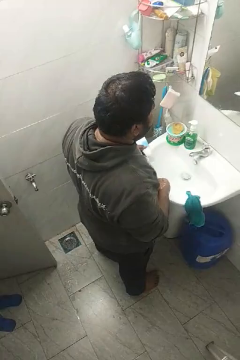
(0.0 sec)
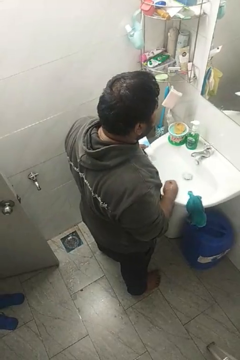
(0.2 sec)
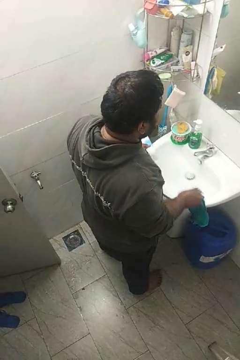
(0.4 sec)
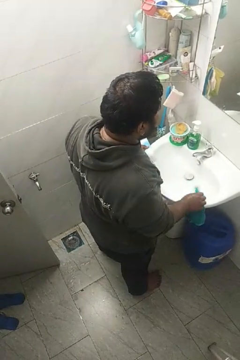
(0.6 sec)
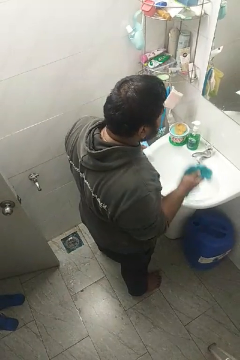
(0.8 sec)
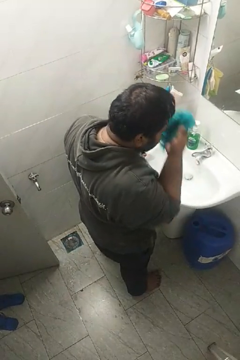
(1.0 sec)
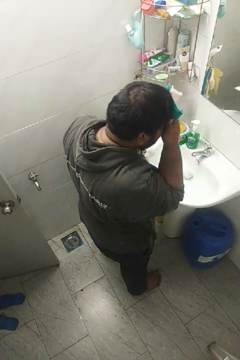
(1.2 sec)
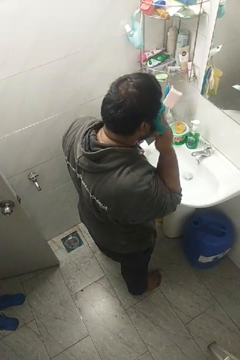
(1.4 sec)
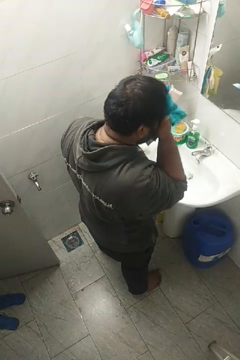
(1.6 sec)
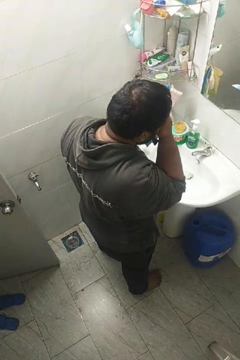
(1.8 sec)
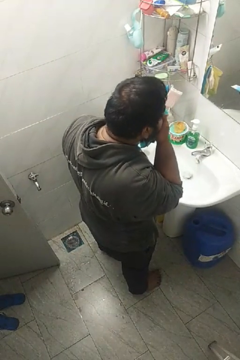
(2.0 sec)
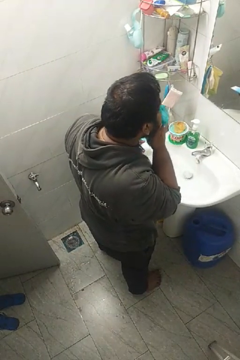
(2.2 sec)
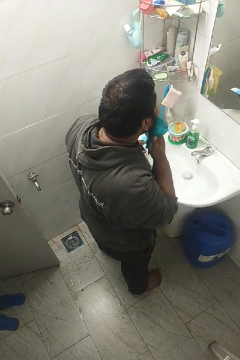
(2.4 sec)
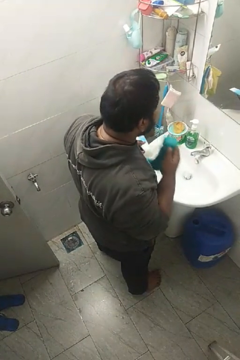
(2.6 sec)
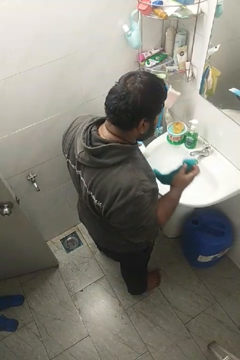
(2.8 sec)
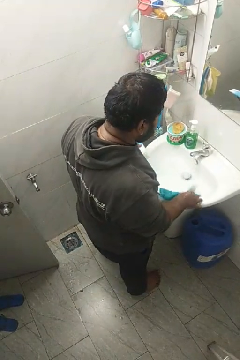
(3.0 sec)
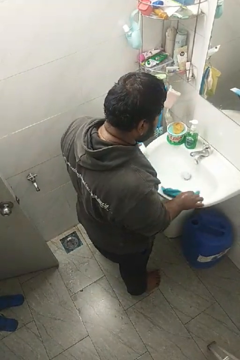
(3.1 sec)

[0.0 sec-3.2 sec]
person dries face with towel

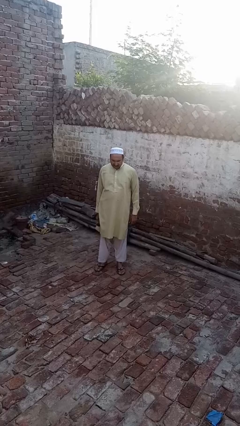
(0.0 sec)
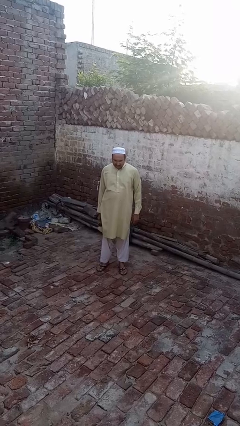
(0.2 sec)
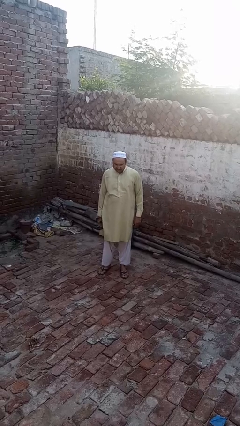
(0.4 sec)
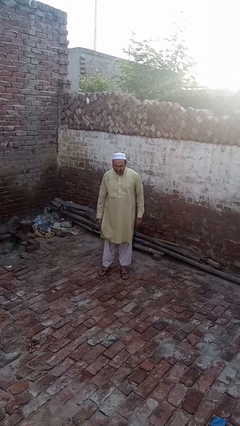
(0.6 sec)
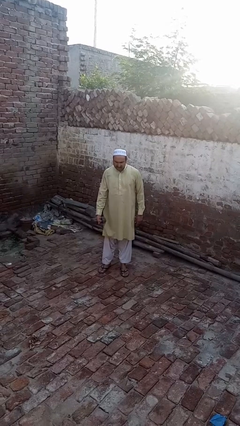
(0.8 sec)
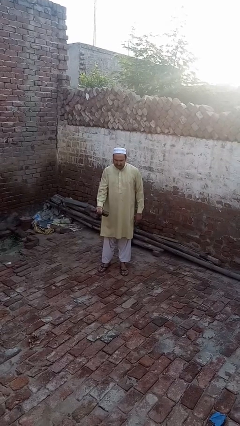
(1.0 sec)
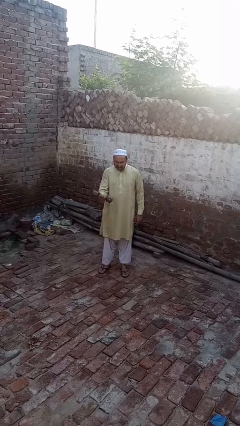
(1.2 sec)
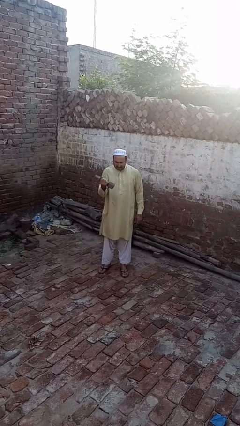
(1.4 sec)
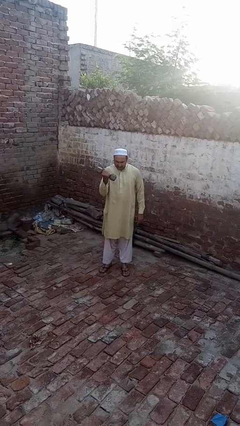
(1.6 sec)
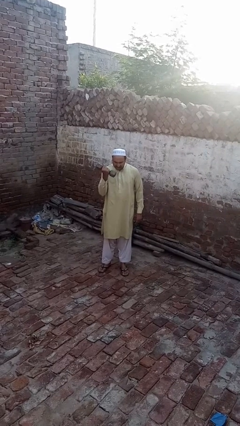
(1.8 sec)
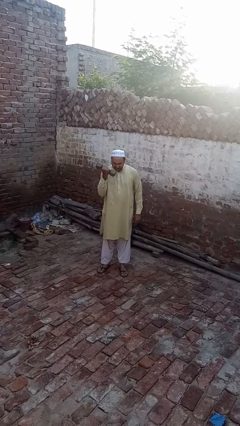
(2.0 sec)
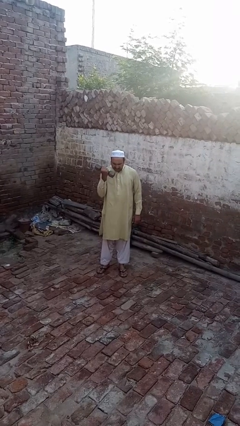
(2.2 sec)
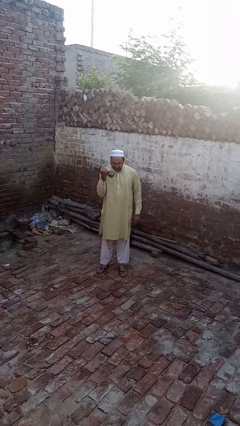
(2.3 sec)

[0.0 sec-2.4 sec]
person lifts dumbbells

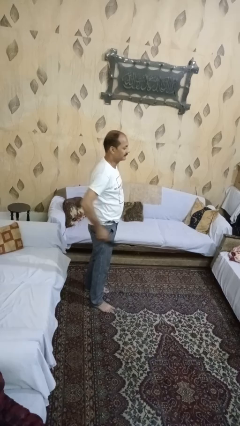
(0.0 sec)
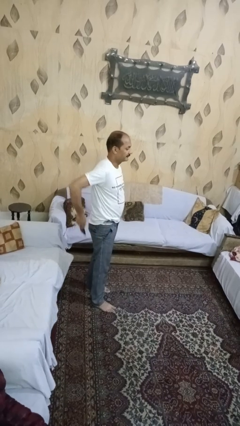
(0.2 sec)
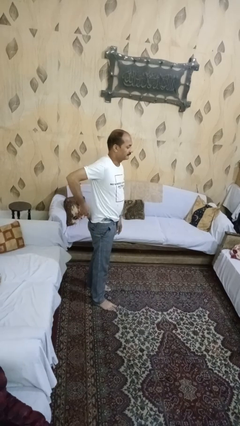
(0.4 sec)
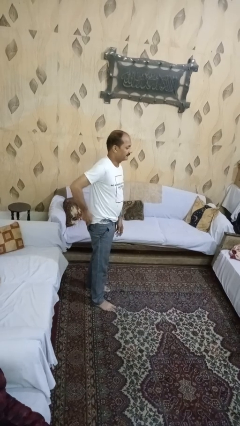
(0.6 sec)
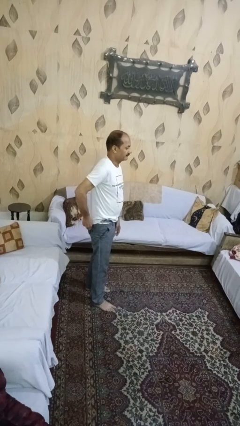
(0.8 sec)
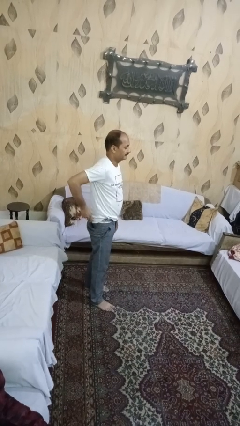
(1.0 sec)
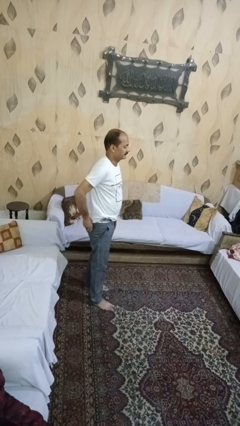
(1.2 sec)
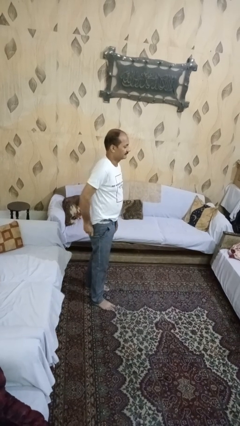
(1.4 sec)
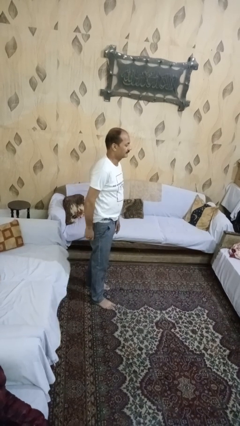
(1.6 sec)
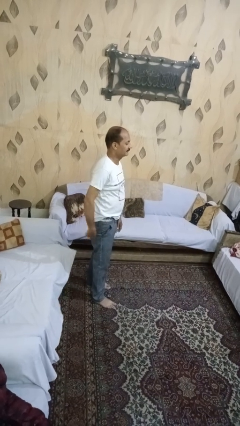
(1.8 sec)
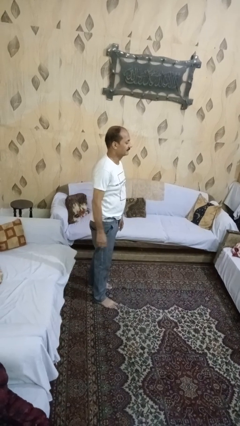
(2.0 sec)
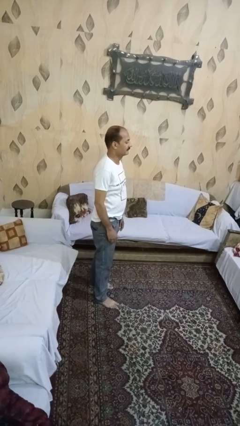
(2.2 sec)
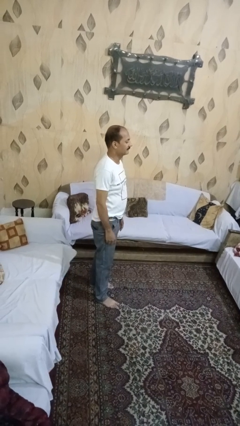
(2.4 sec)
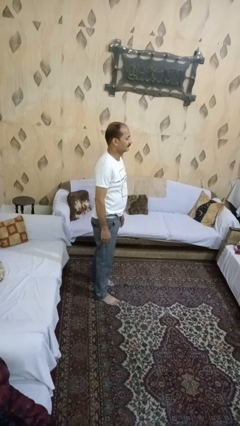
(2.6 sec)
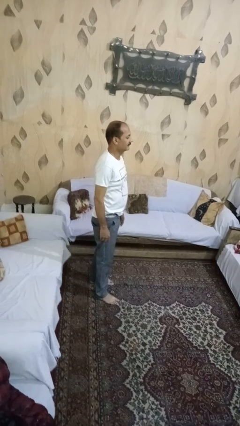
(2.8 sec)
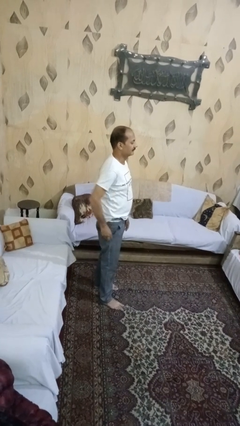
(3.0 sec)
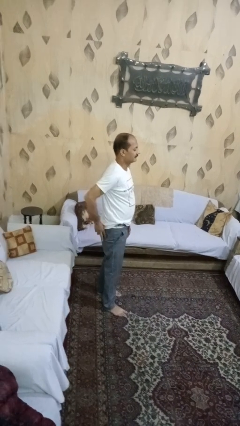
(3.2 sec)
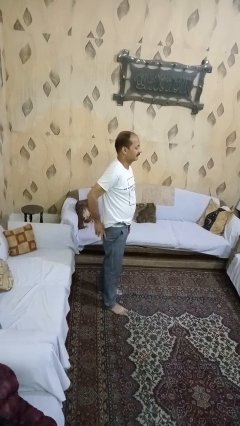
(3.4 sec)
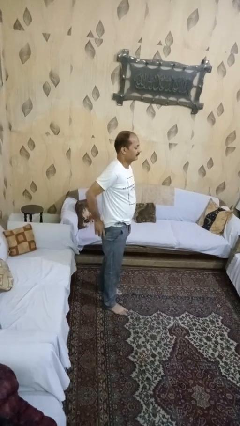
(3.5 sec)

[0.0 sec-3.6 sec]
person puts phone into pocket

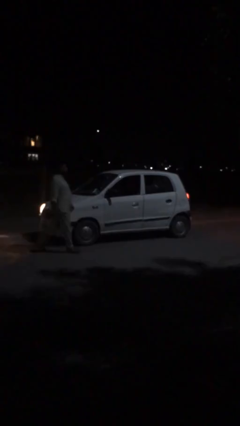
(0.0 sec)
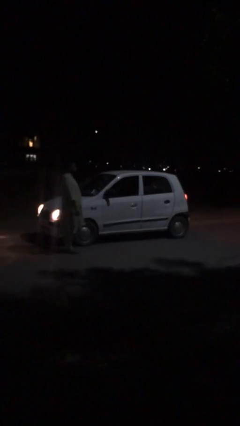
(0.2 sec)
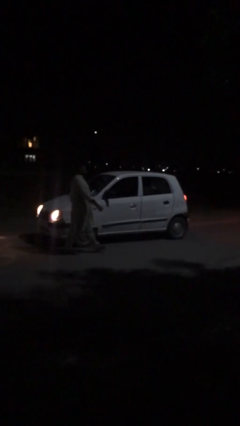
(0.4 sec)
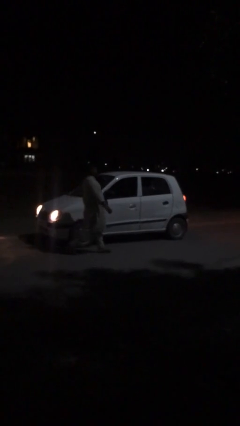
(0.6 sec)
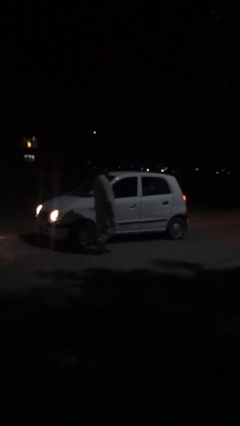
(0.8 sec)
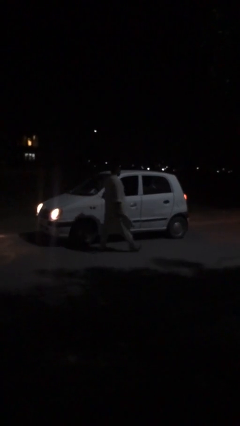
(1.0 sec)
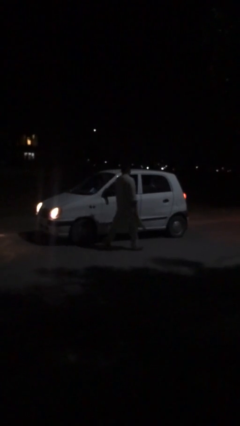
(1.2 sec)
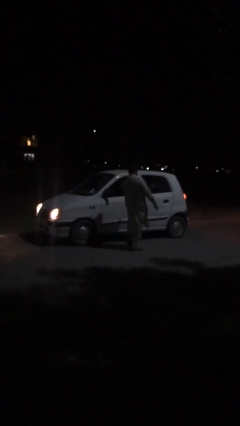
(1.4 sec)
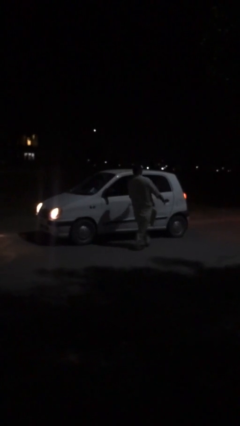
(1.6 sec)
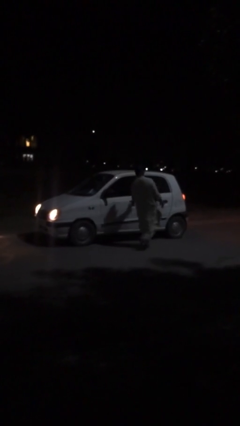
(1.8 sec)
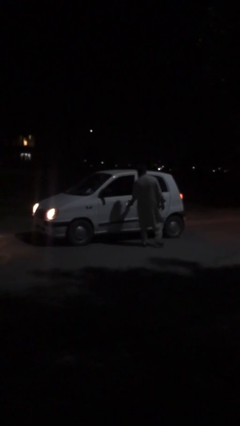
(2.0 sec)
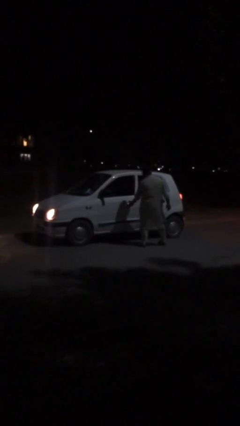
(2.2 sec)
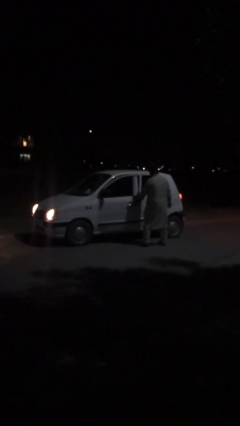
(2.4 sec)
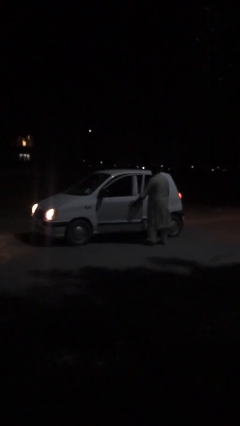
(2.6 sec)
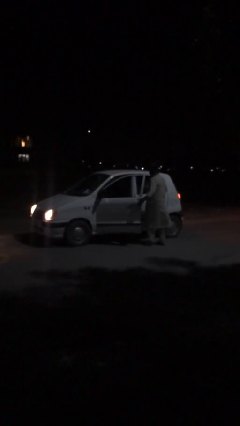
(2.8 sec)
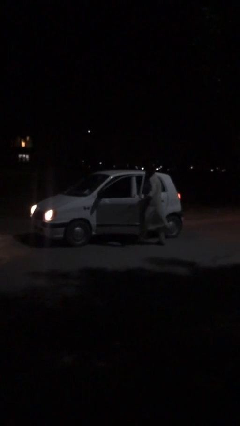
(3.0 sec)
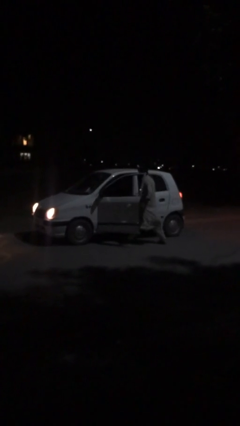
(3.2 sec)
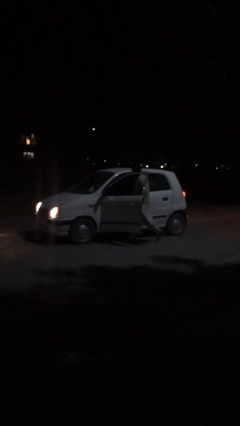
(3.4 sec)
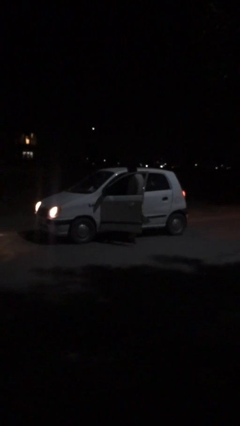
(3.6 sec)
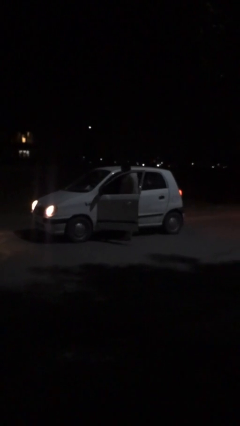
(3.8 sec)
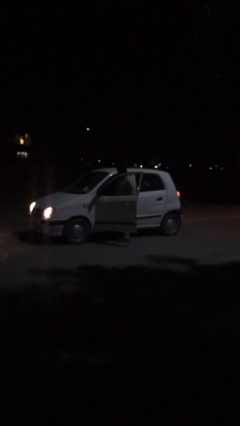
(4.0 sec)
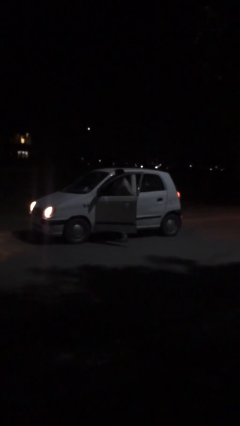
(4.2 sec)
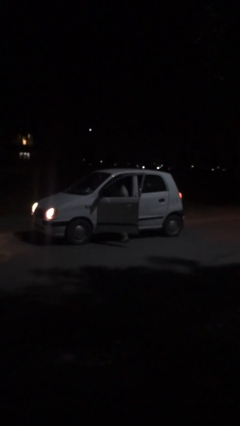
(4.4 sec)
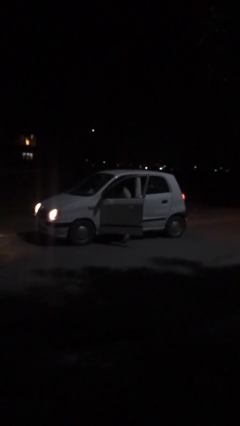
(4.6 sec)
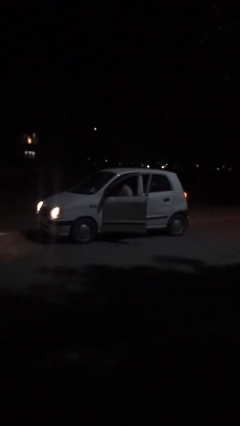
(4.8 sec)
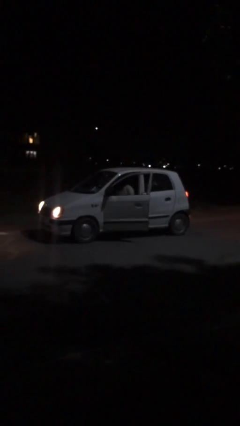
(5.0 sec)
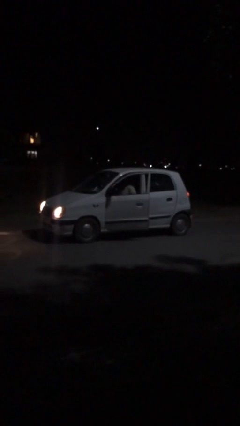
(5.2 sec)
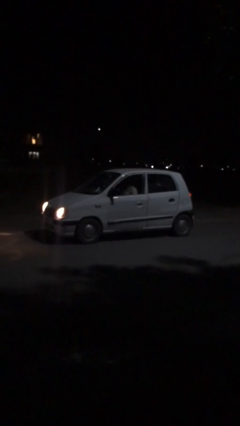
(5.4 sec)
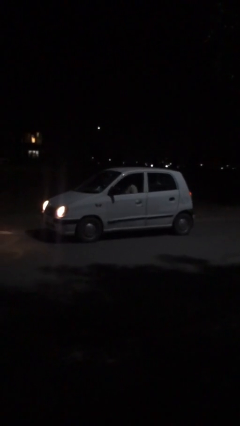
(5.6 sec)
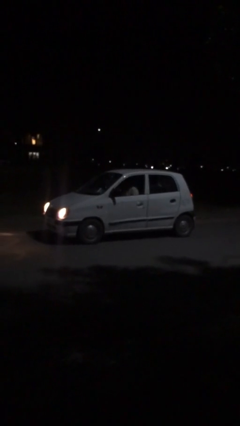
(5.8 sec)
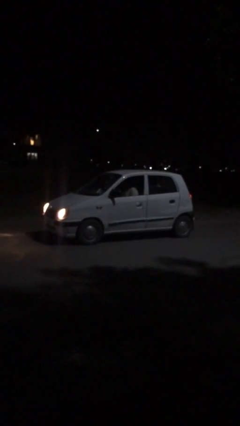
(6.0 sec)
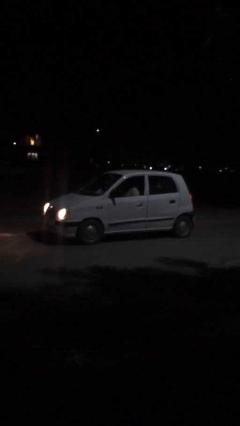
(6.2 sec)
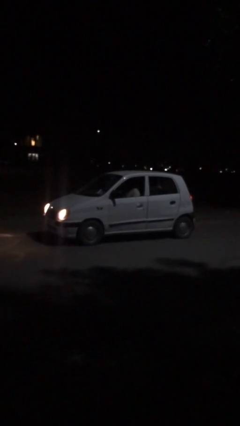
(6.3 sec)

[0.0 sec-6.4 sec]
car picks up person

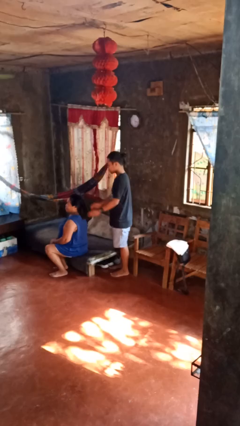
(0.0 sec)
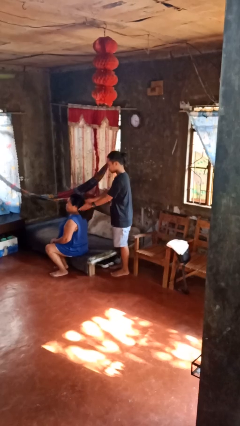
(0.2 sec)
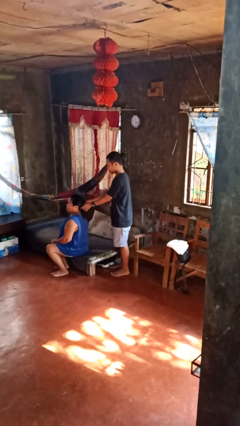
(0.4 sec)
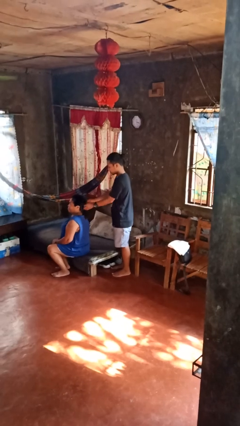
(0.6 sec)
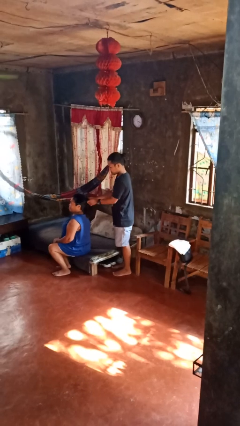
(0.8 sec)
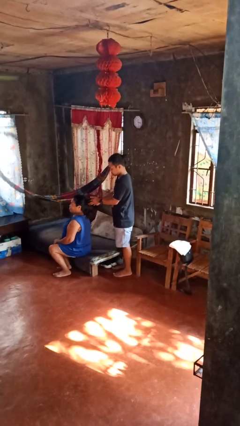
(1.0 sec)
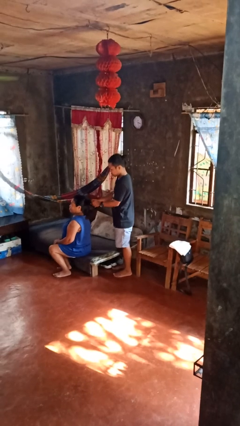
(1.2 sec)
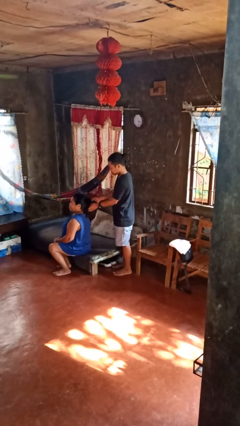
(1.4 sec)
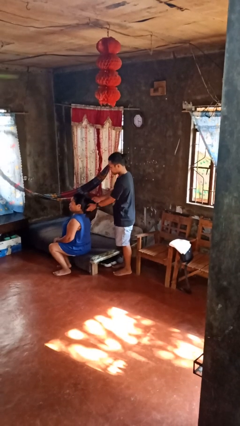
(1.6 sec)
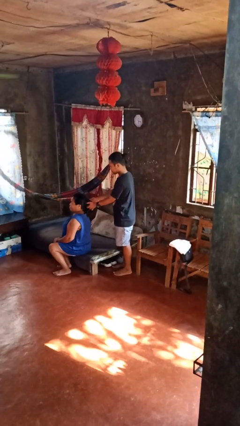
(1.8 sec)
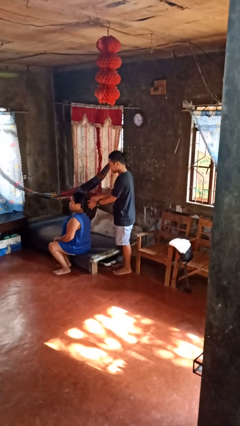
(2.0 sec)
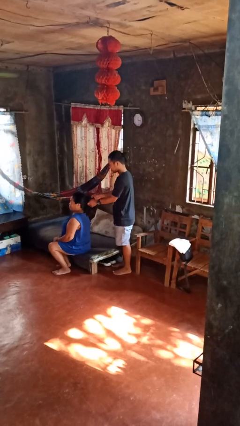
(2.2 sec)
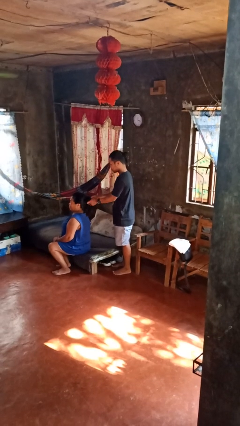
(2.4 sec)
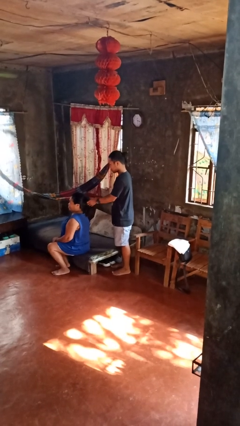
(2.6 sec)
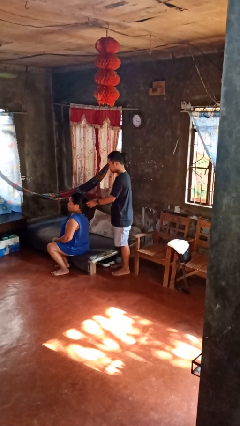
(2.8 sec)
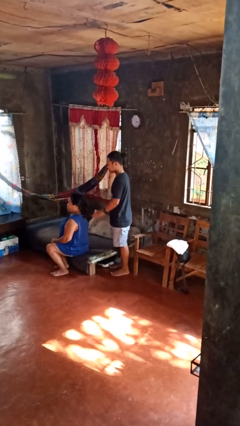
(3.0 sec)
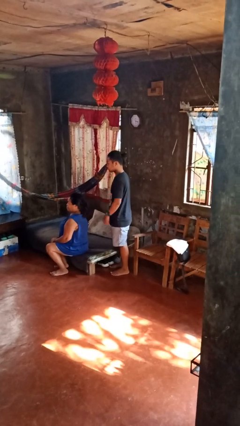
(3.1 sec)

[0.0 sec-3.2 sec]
person braids hair of person
